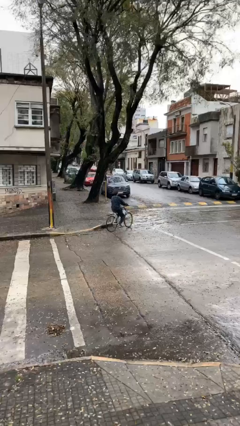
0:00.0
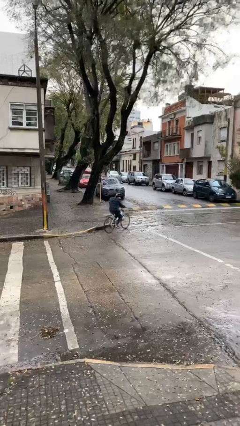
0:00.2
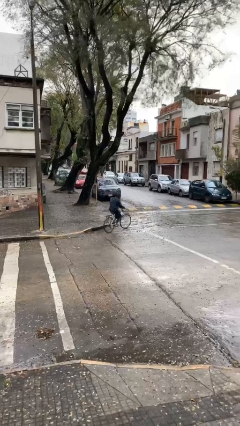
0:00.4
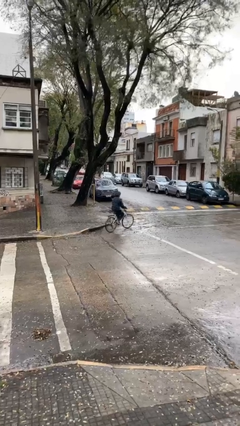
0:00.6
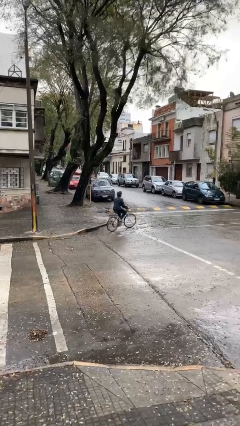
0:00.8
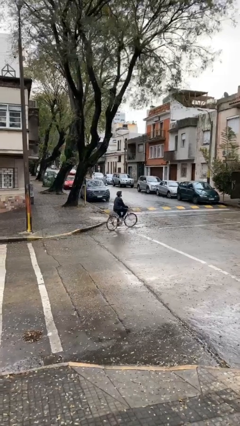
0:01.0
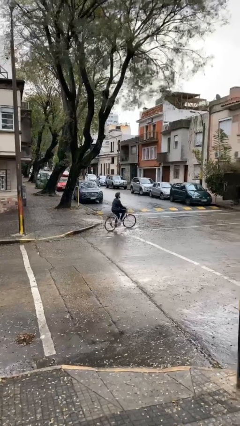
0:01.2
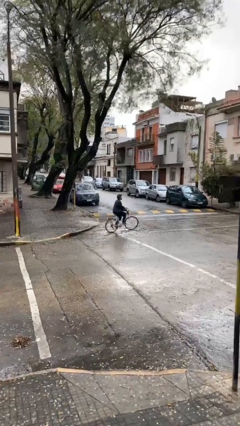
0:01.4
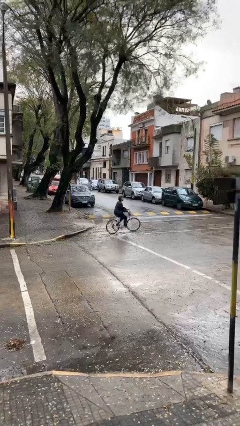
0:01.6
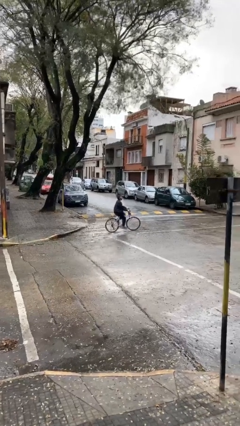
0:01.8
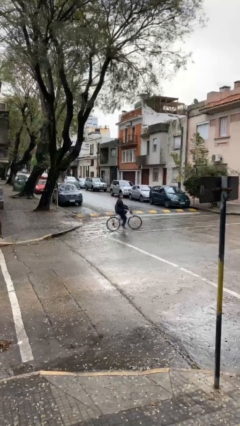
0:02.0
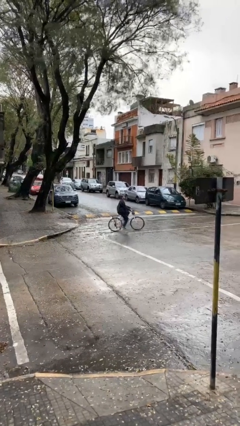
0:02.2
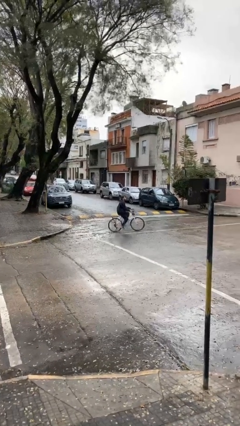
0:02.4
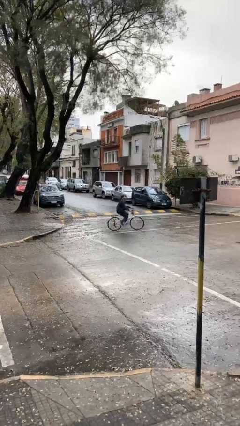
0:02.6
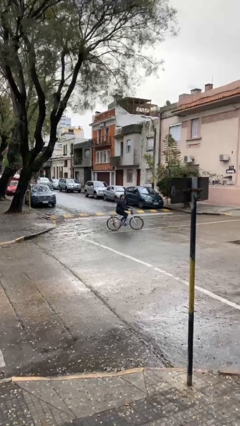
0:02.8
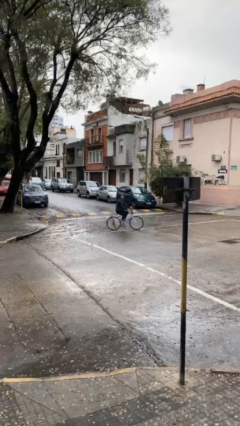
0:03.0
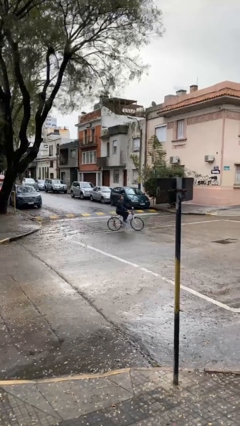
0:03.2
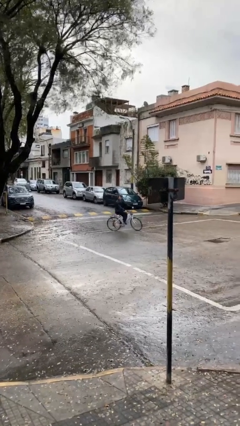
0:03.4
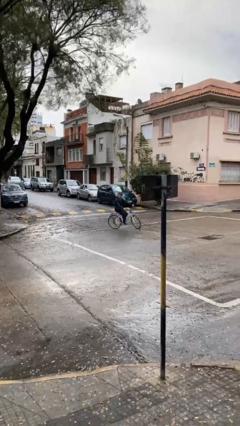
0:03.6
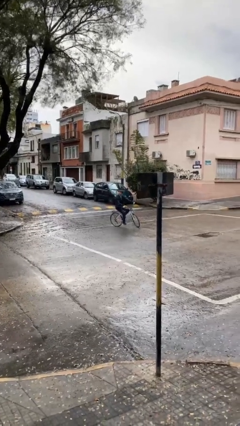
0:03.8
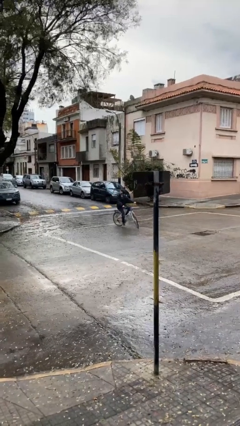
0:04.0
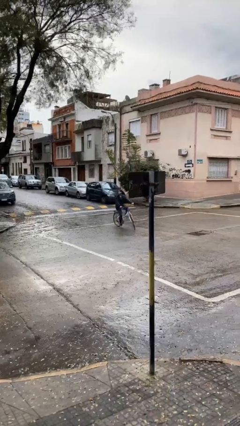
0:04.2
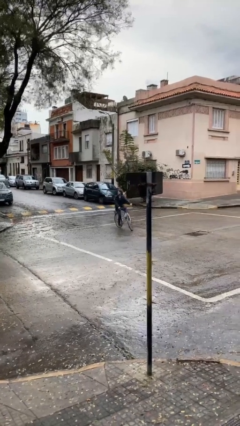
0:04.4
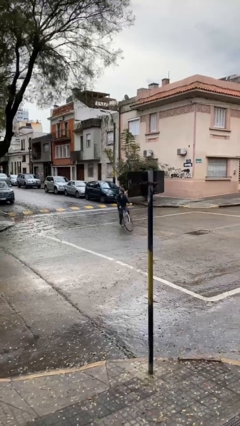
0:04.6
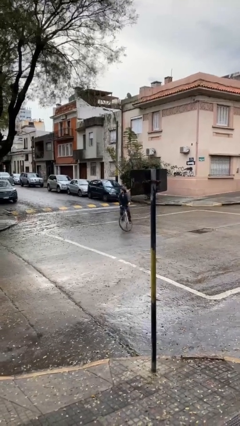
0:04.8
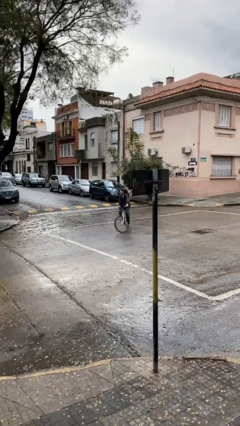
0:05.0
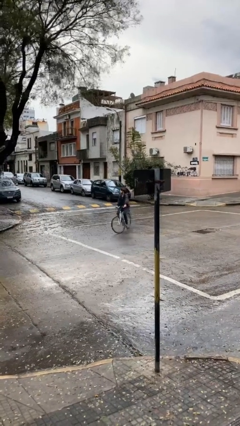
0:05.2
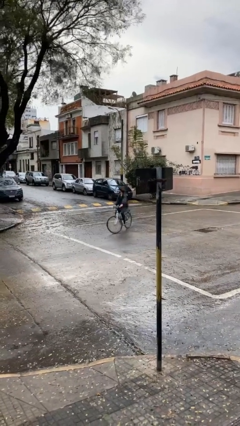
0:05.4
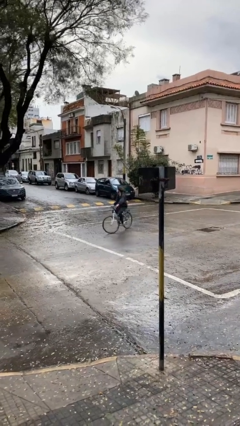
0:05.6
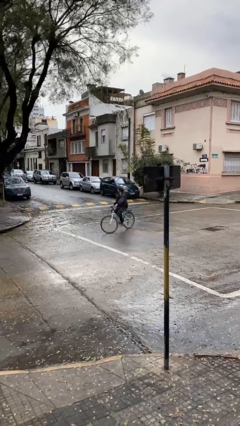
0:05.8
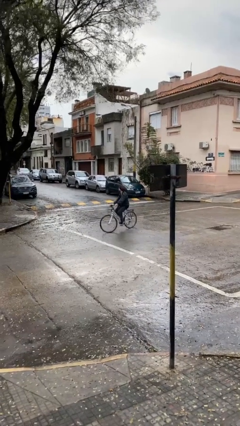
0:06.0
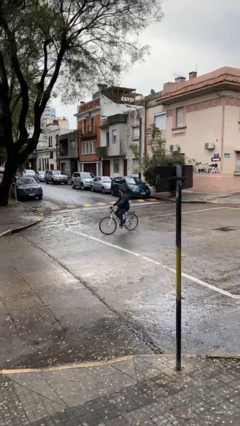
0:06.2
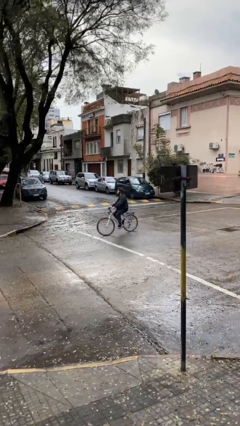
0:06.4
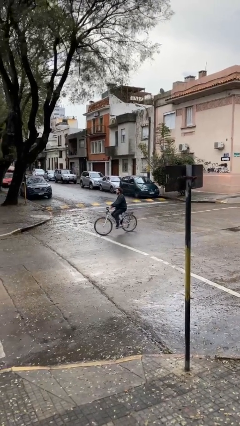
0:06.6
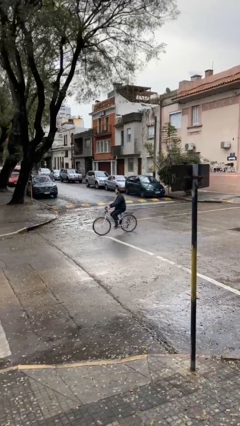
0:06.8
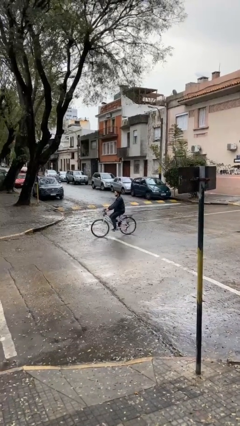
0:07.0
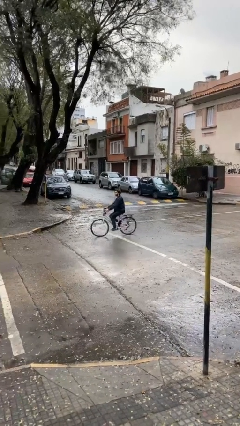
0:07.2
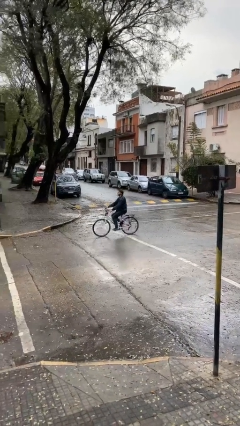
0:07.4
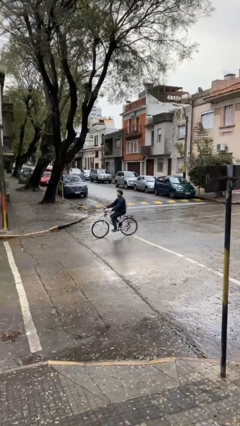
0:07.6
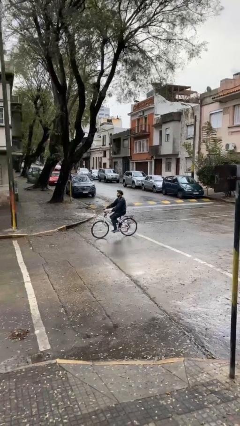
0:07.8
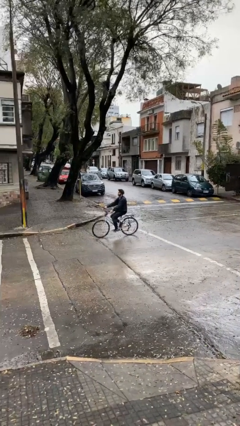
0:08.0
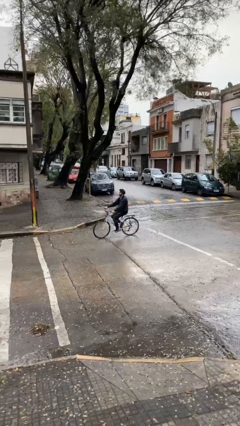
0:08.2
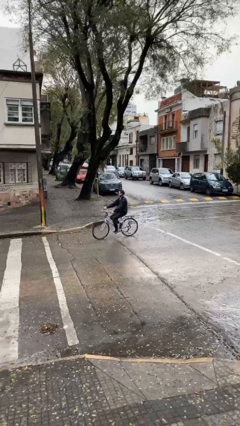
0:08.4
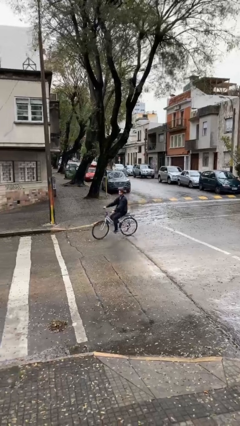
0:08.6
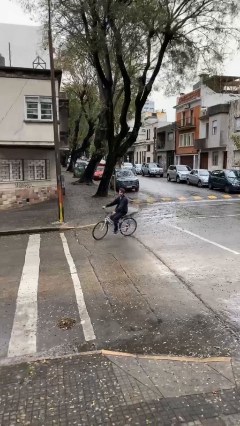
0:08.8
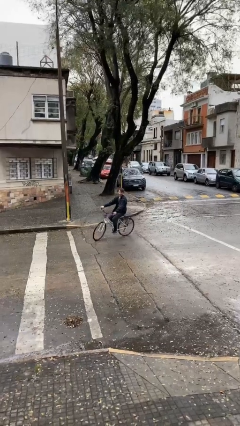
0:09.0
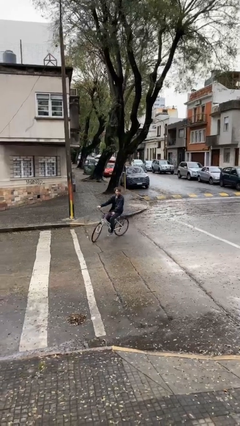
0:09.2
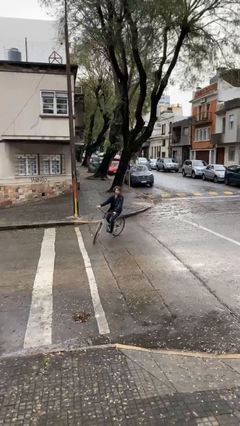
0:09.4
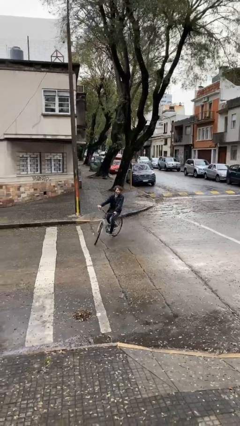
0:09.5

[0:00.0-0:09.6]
person rides bicycle

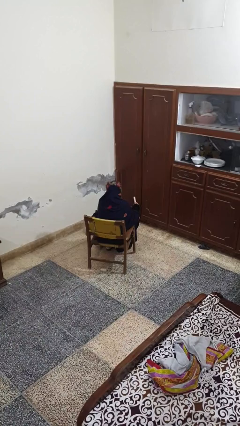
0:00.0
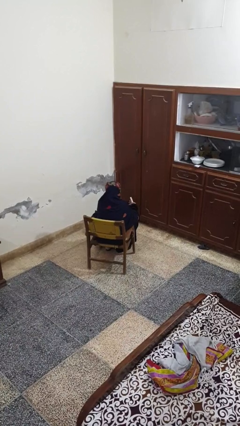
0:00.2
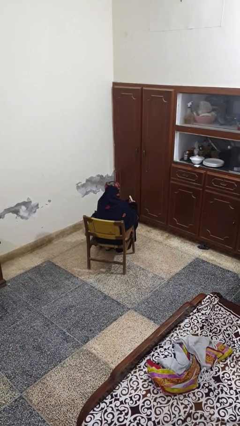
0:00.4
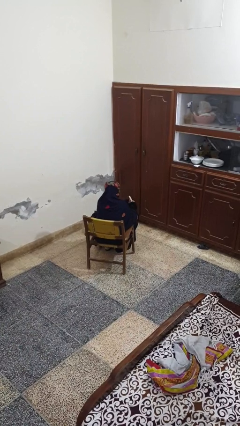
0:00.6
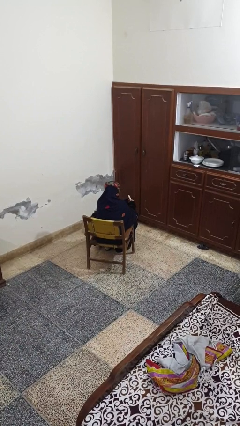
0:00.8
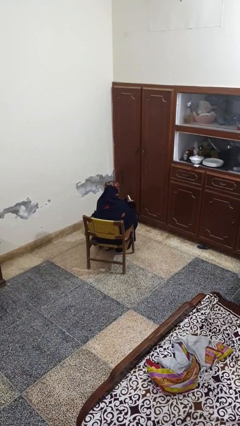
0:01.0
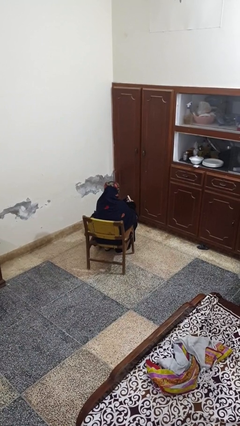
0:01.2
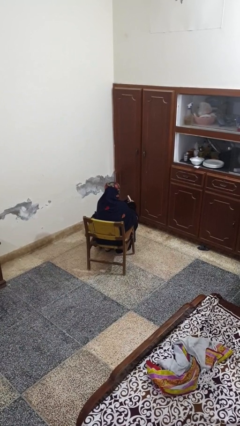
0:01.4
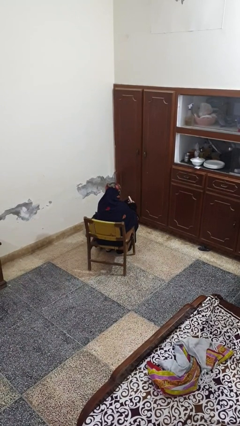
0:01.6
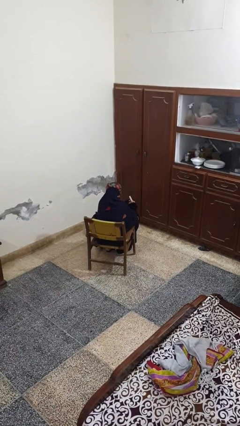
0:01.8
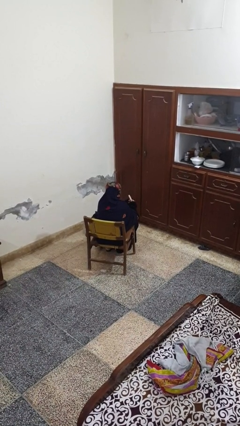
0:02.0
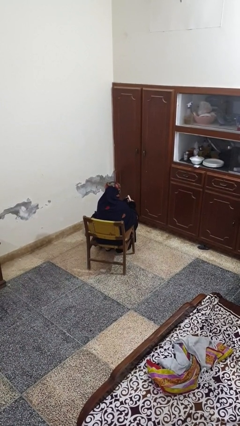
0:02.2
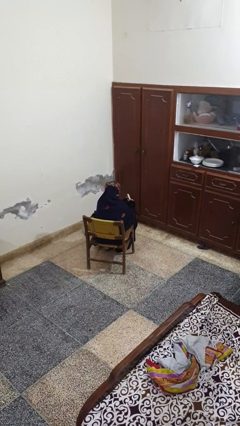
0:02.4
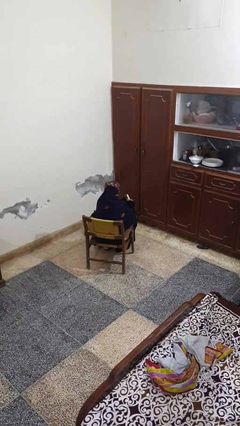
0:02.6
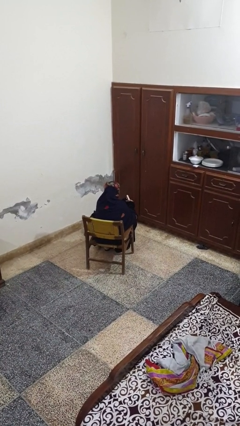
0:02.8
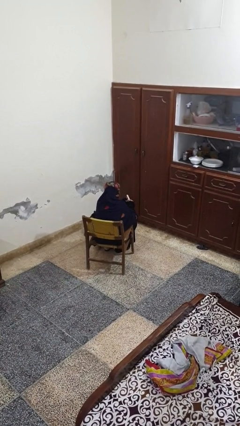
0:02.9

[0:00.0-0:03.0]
person files fingernails

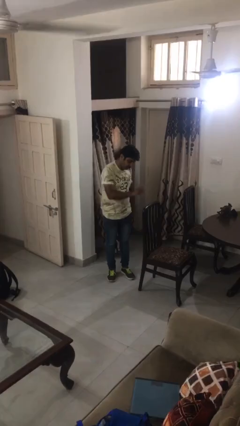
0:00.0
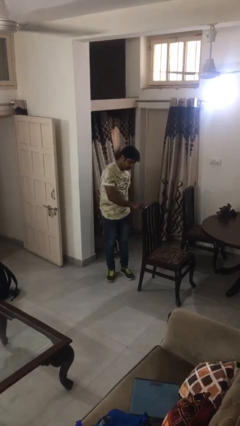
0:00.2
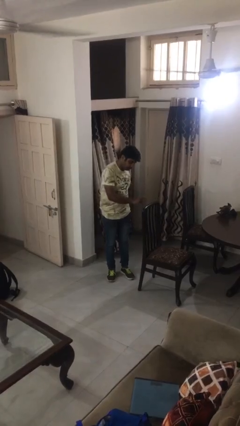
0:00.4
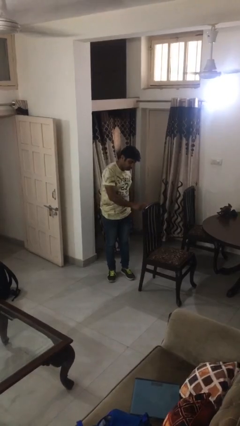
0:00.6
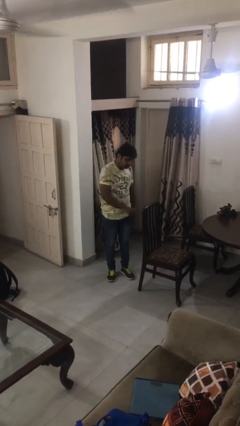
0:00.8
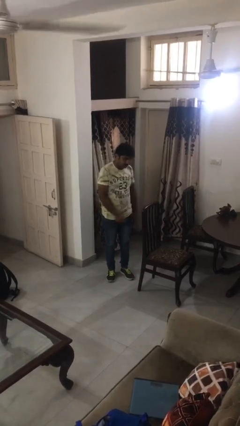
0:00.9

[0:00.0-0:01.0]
person taps object with finger

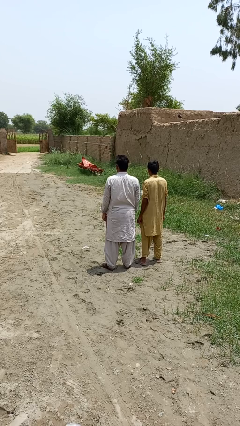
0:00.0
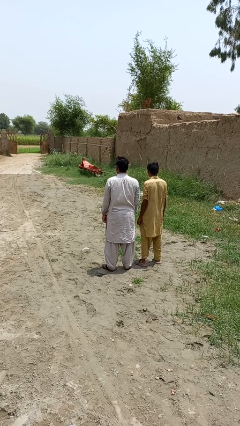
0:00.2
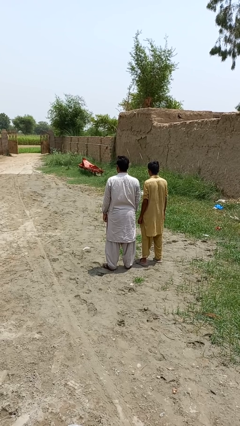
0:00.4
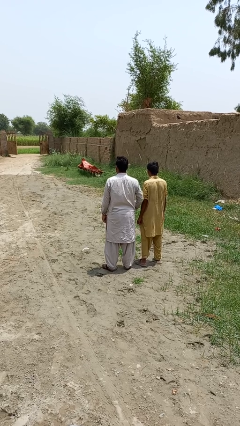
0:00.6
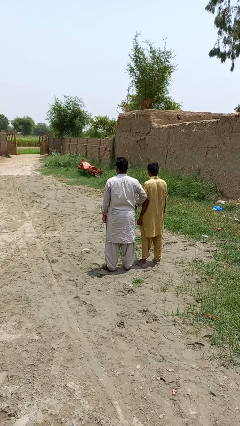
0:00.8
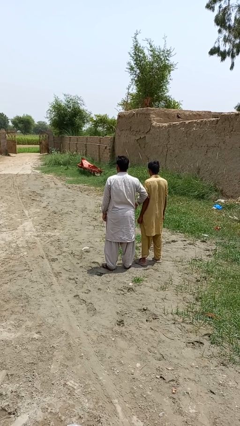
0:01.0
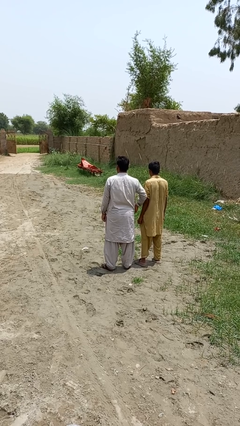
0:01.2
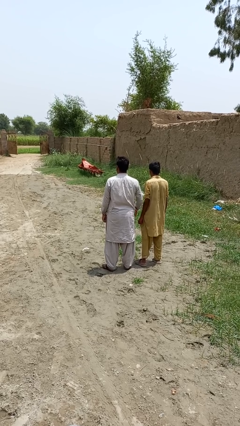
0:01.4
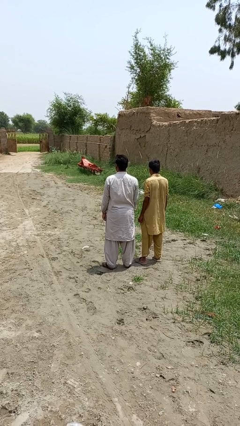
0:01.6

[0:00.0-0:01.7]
person nudges person with elbow

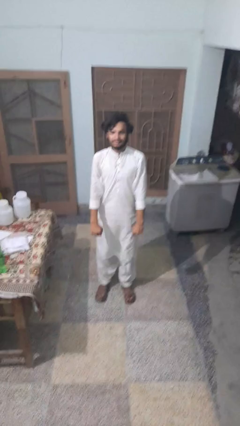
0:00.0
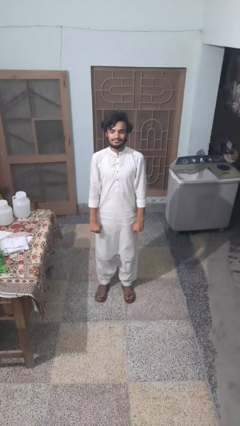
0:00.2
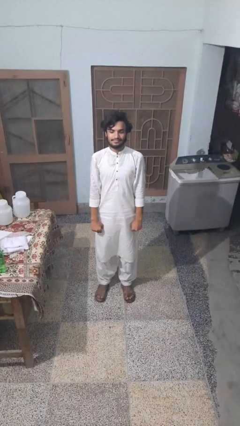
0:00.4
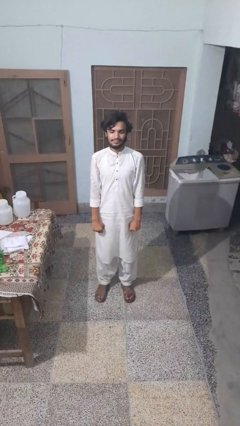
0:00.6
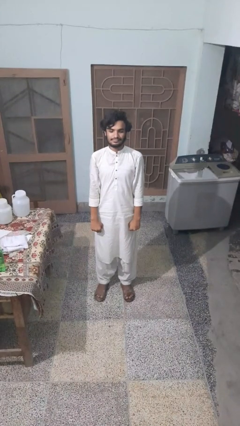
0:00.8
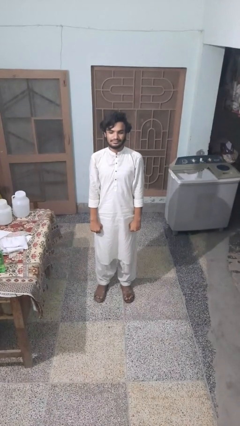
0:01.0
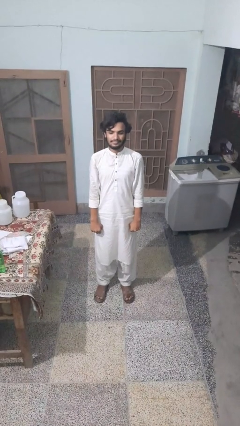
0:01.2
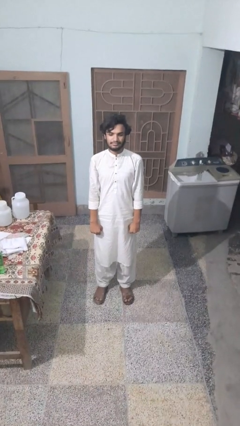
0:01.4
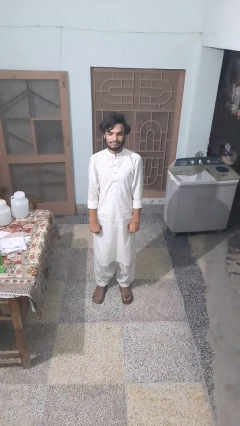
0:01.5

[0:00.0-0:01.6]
person stands up

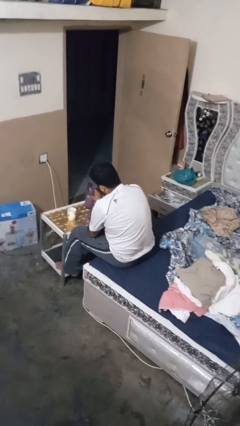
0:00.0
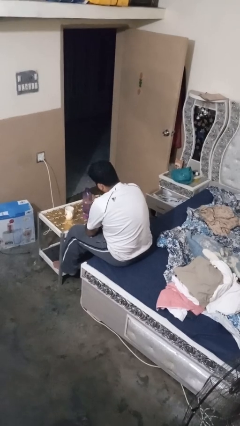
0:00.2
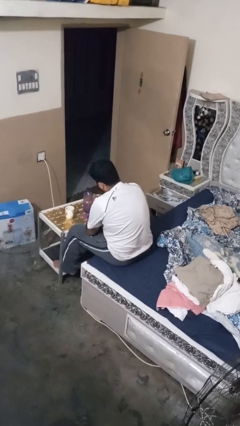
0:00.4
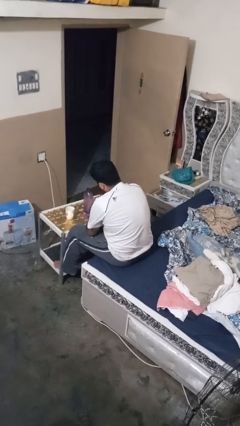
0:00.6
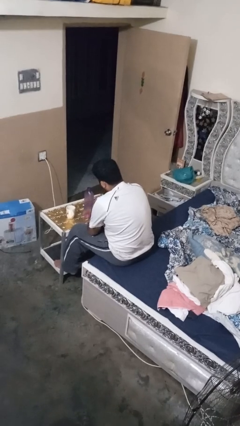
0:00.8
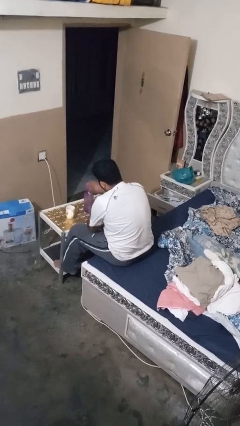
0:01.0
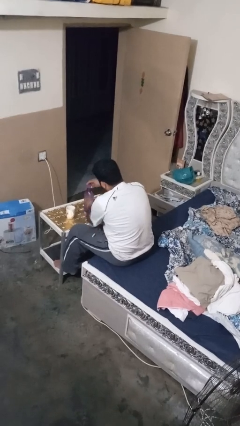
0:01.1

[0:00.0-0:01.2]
person screws lid to bottle
